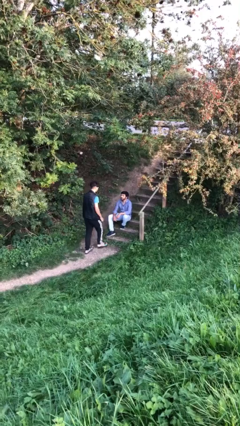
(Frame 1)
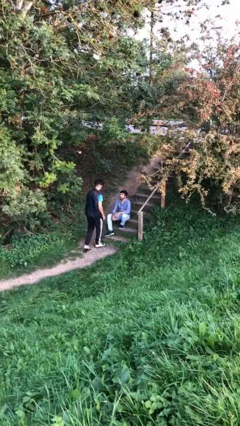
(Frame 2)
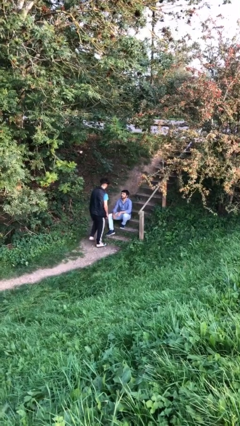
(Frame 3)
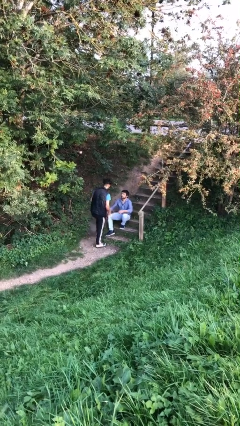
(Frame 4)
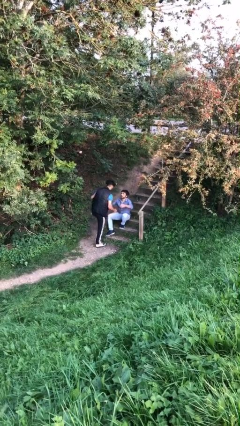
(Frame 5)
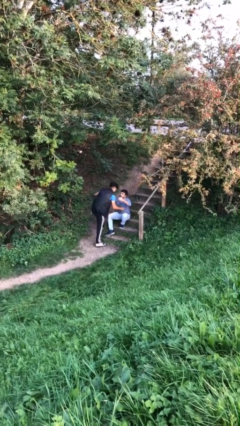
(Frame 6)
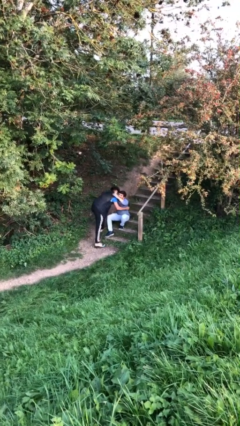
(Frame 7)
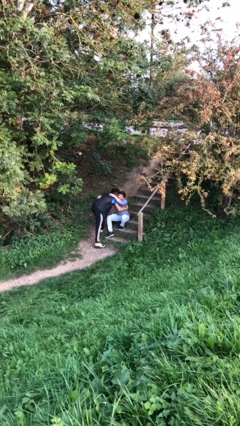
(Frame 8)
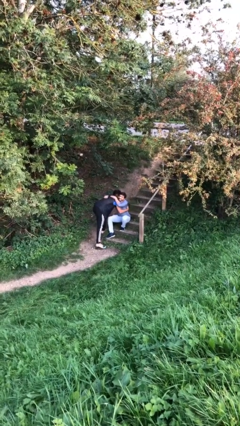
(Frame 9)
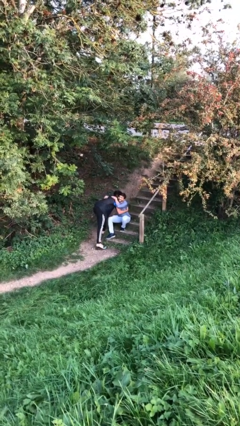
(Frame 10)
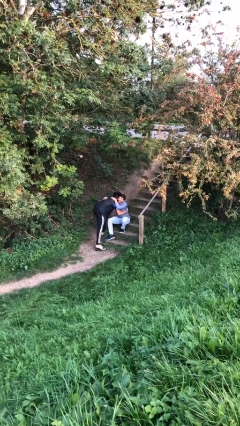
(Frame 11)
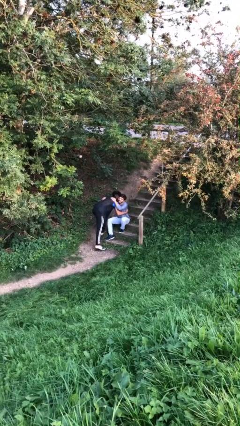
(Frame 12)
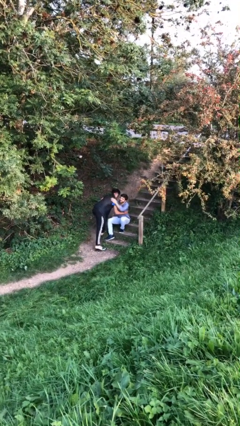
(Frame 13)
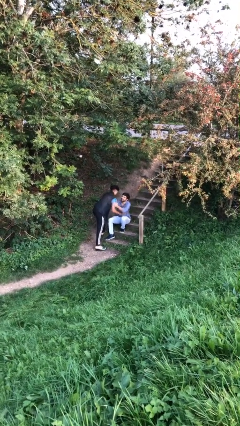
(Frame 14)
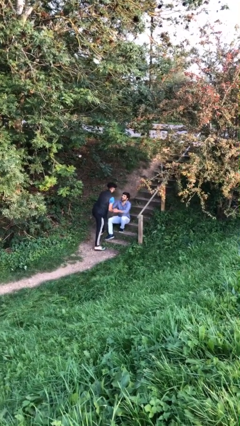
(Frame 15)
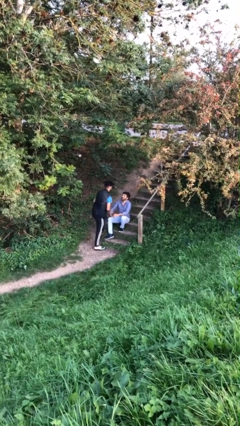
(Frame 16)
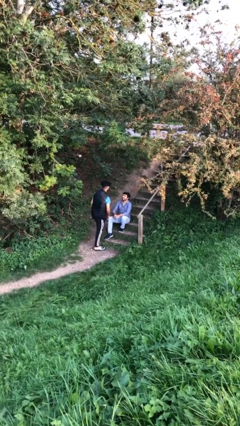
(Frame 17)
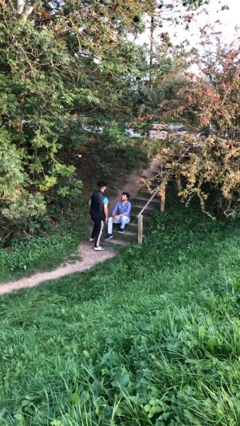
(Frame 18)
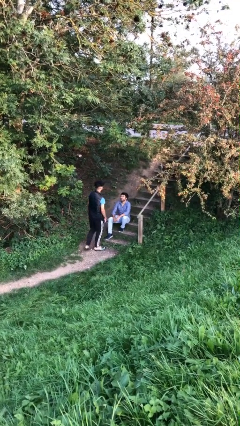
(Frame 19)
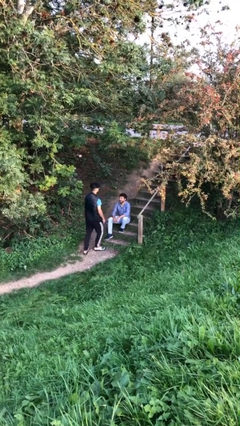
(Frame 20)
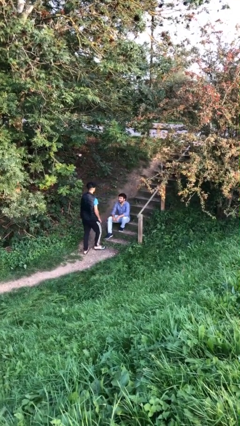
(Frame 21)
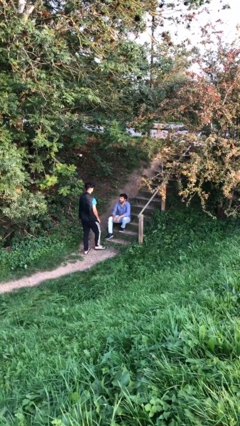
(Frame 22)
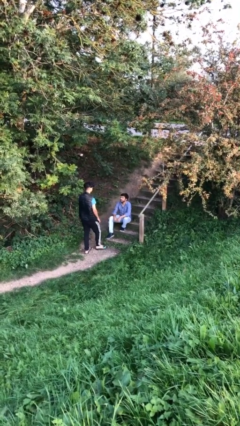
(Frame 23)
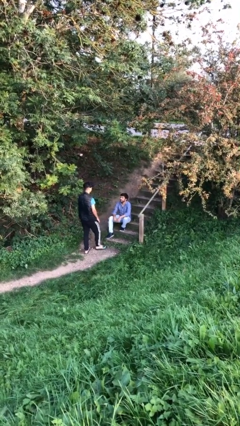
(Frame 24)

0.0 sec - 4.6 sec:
person embraces person

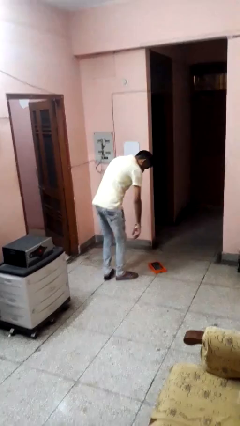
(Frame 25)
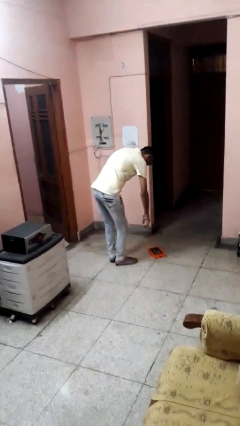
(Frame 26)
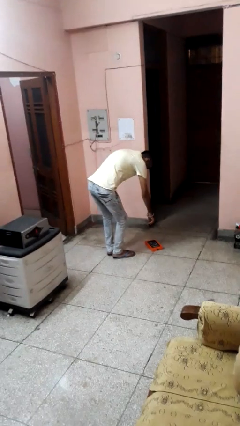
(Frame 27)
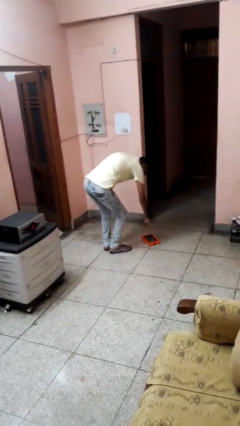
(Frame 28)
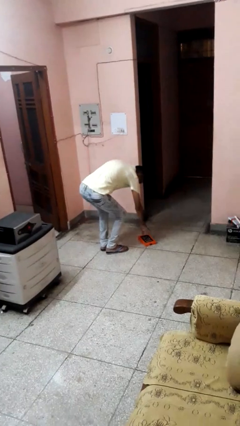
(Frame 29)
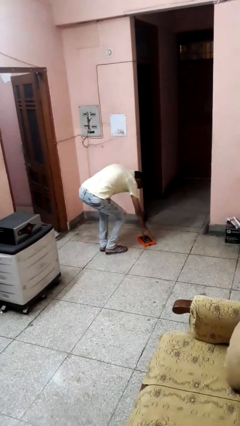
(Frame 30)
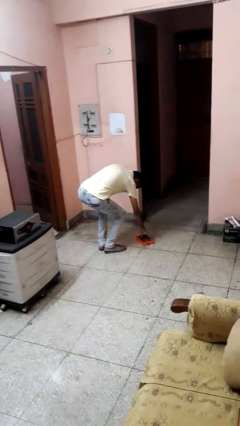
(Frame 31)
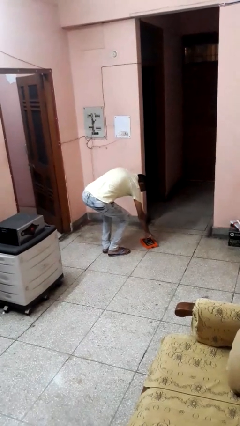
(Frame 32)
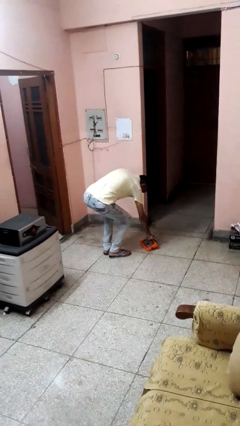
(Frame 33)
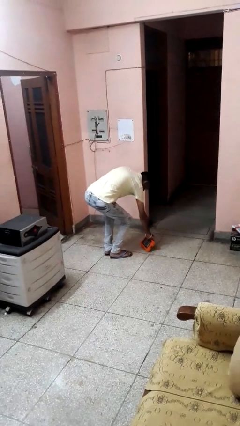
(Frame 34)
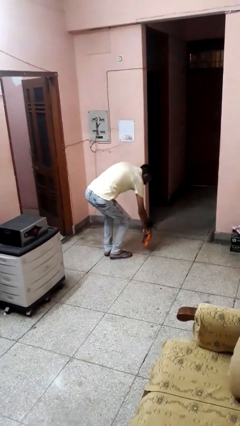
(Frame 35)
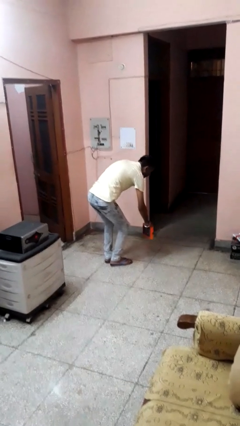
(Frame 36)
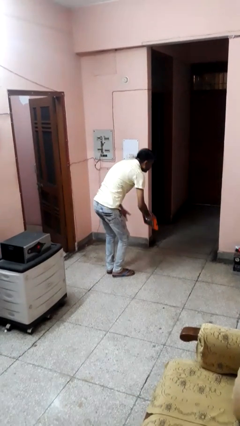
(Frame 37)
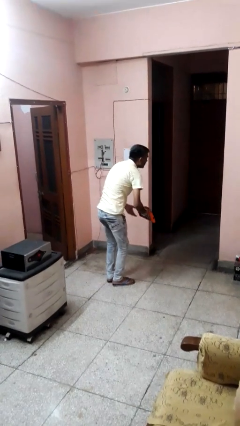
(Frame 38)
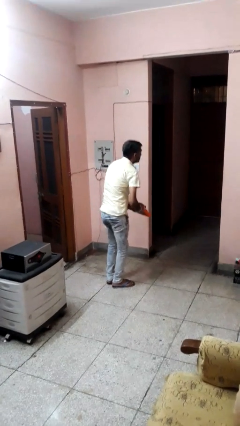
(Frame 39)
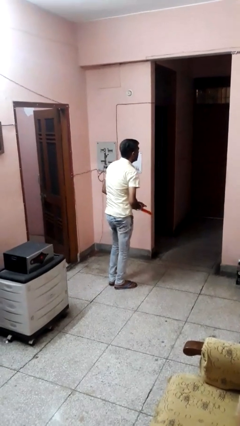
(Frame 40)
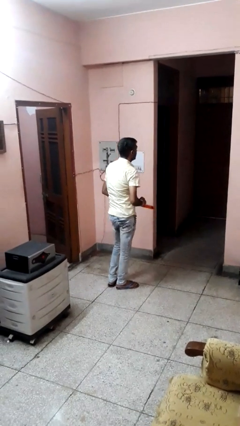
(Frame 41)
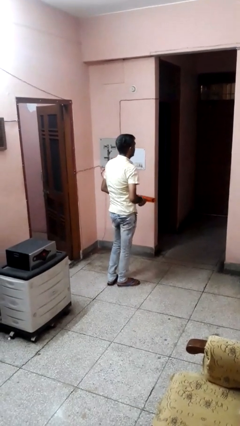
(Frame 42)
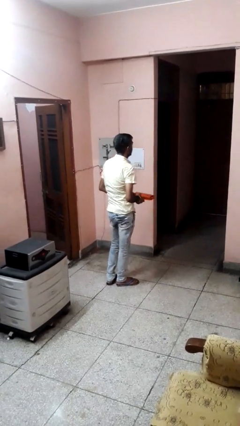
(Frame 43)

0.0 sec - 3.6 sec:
person picks up object from floor

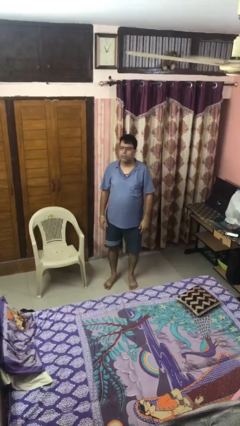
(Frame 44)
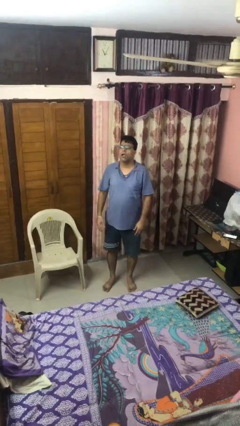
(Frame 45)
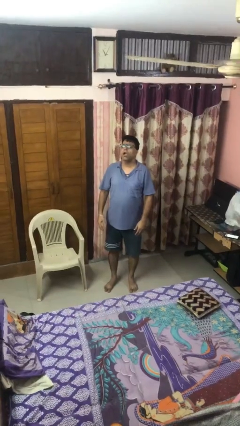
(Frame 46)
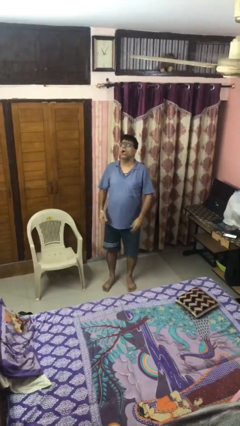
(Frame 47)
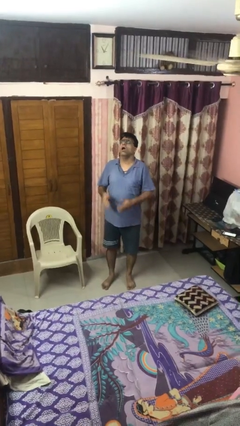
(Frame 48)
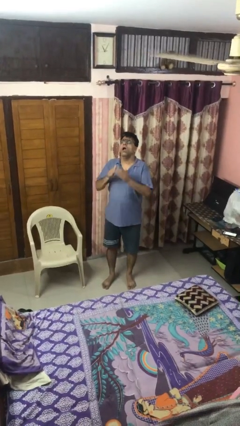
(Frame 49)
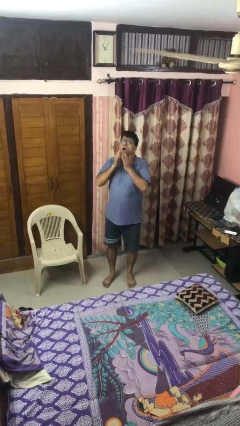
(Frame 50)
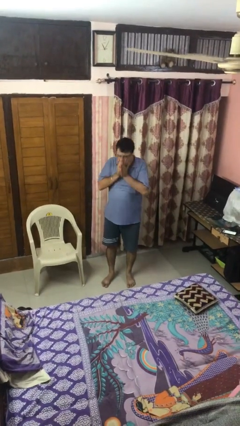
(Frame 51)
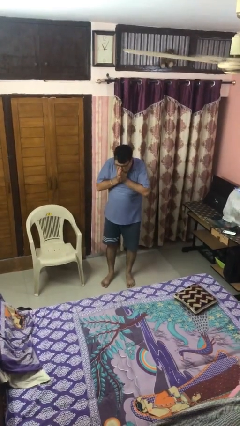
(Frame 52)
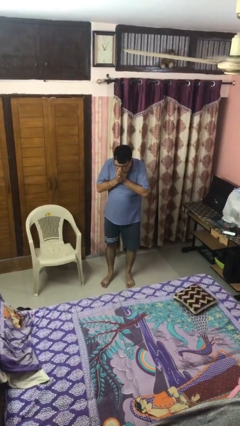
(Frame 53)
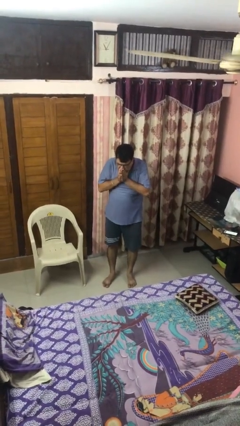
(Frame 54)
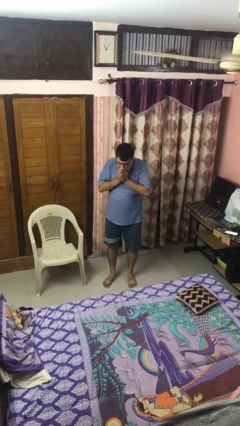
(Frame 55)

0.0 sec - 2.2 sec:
person sneezes into hand

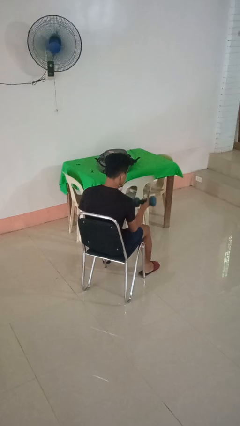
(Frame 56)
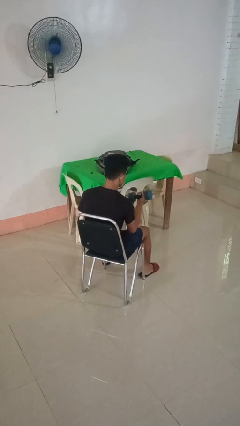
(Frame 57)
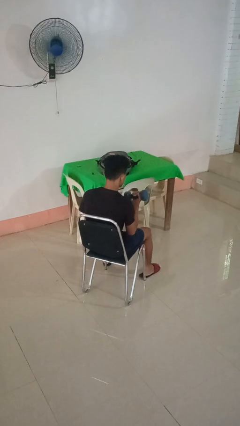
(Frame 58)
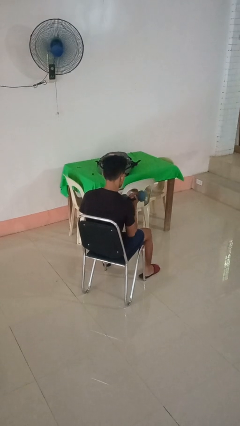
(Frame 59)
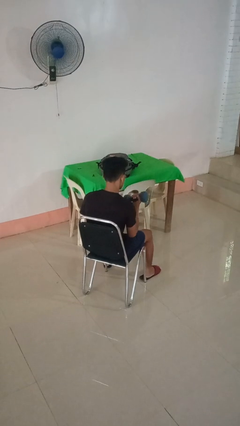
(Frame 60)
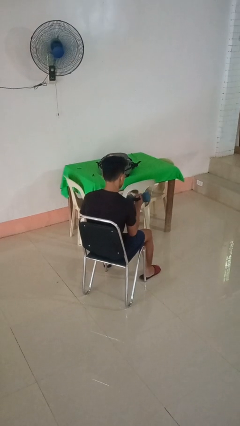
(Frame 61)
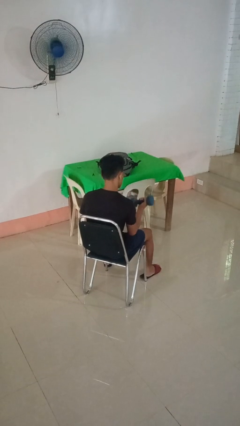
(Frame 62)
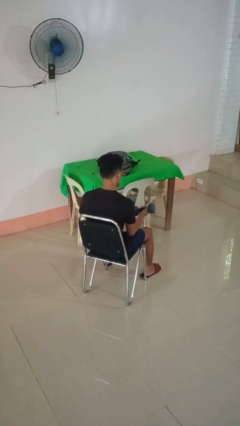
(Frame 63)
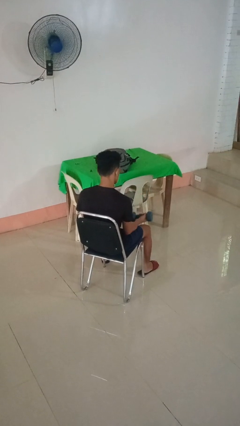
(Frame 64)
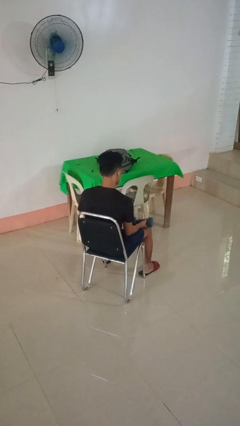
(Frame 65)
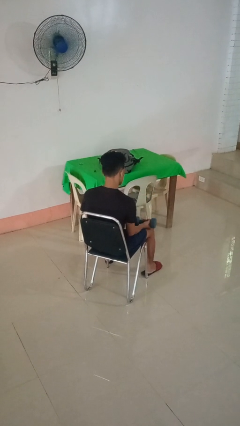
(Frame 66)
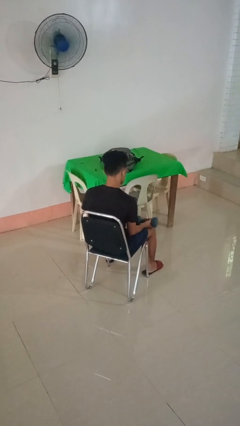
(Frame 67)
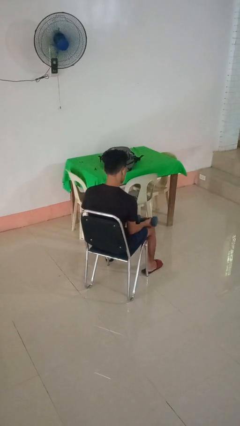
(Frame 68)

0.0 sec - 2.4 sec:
person lifts dumbbells

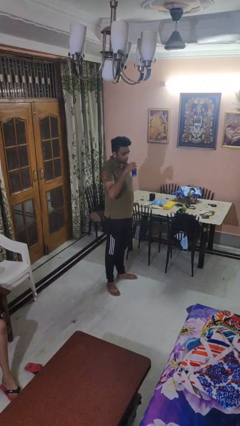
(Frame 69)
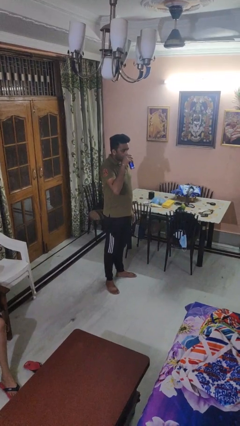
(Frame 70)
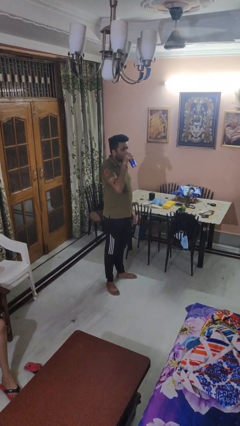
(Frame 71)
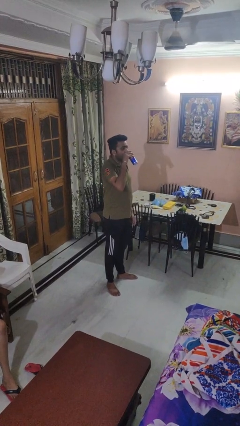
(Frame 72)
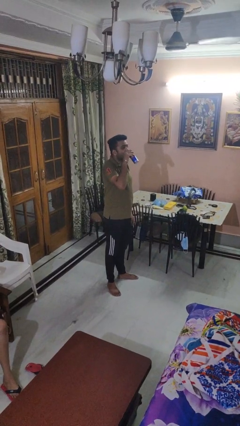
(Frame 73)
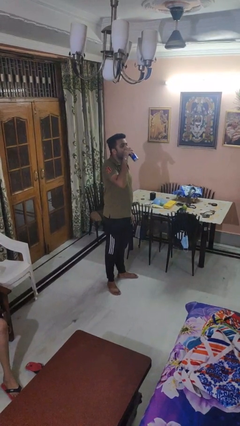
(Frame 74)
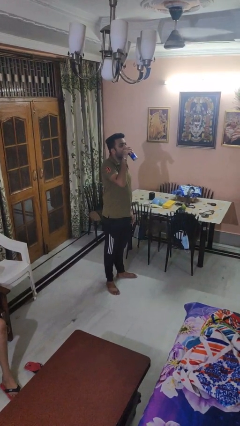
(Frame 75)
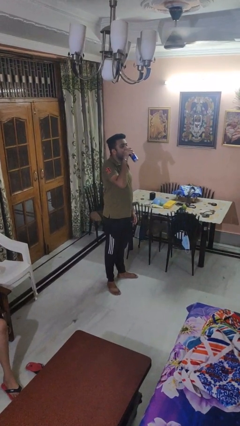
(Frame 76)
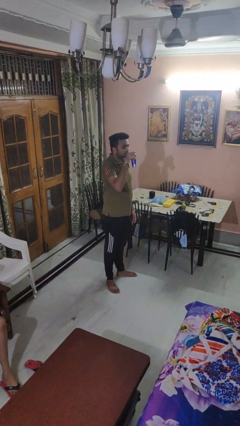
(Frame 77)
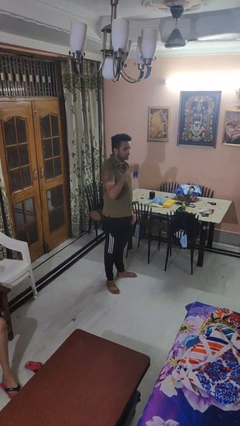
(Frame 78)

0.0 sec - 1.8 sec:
person drinks from beverage can

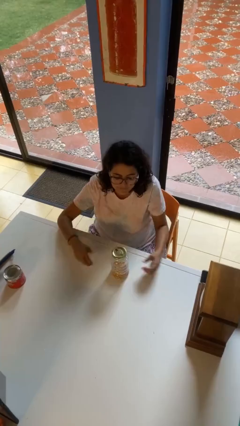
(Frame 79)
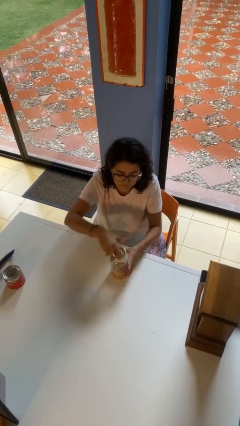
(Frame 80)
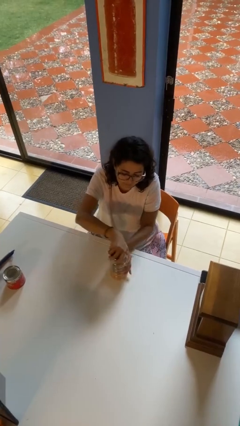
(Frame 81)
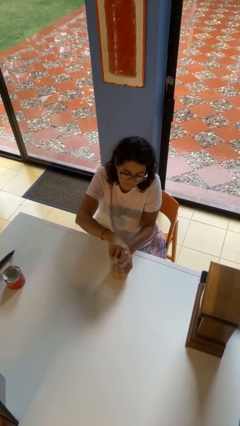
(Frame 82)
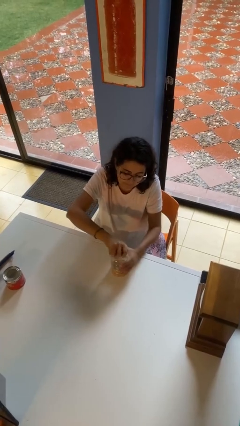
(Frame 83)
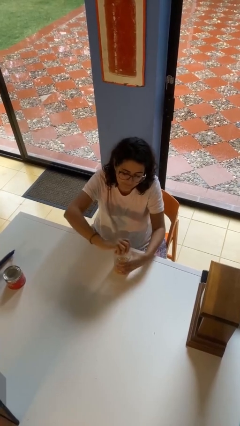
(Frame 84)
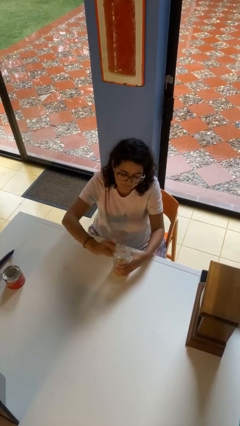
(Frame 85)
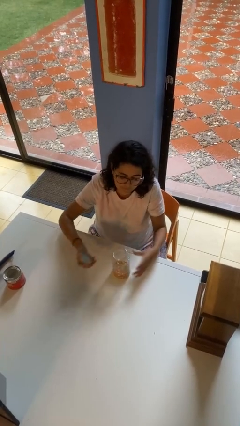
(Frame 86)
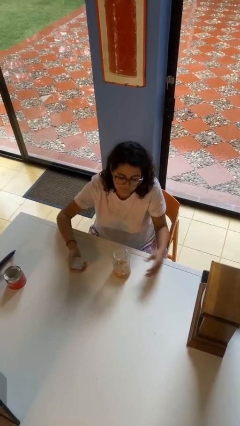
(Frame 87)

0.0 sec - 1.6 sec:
person opens jar

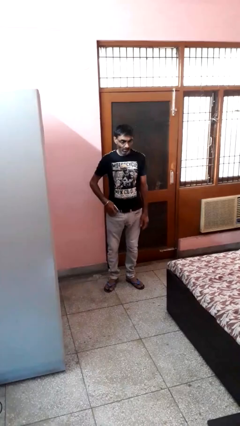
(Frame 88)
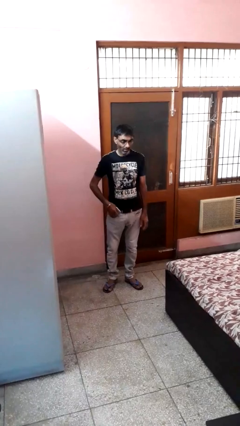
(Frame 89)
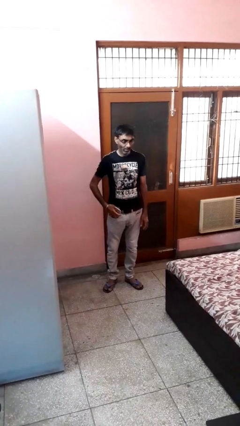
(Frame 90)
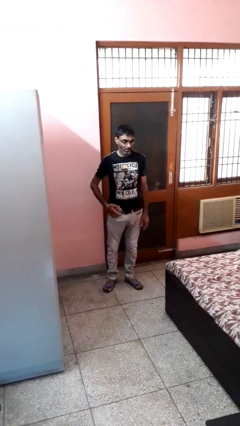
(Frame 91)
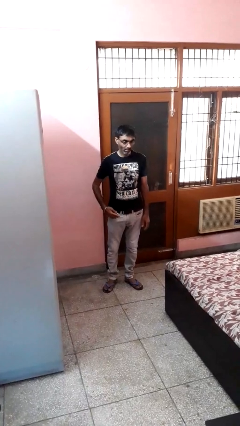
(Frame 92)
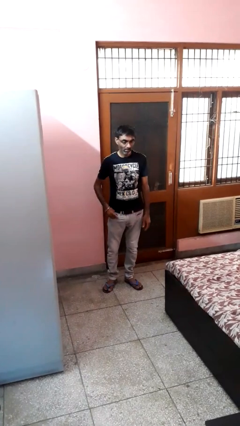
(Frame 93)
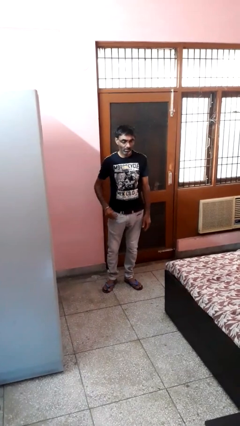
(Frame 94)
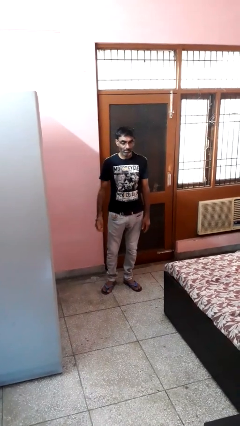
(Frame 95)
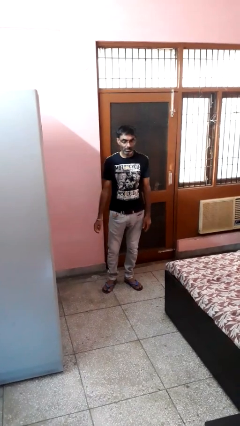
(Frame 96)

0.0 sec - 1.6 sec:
person puts phone into pocket
